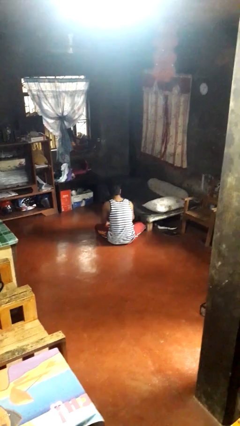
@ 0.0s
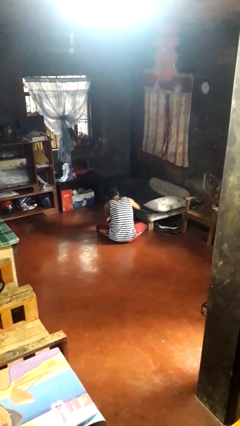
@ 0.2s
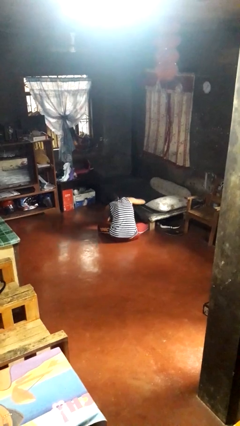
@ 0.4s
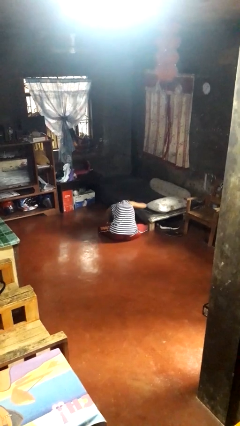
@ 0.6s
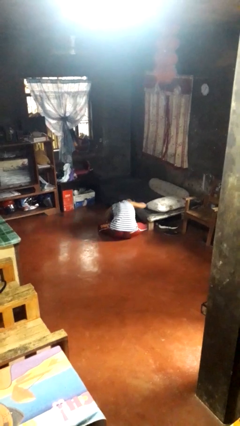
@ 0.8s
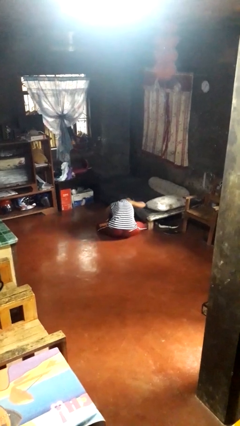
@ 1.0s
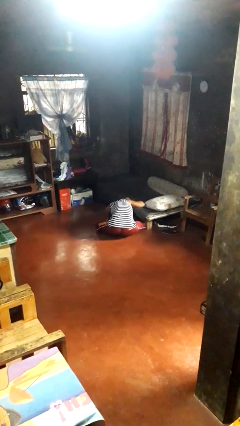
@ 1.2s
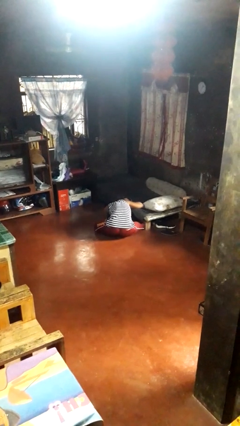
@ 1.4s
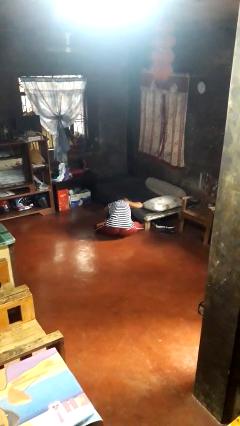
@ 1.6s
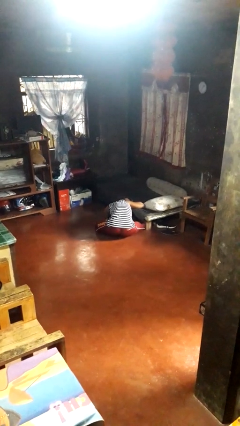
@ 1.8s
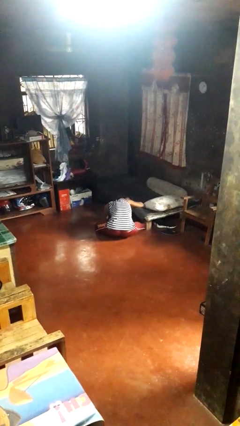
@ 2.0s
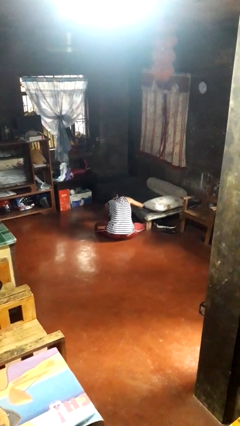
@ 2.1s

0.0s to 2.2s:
person searches under bed

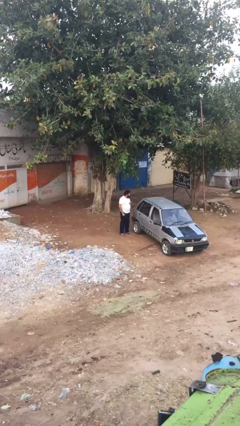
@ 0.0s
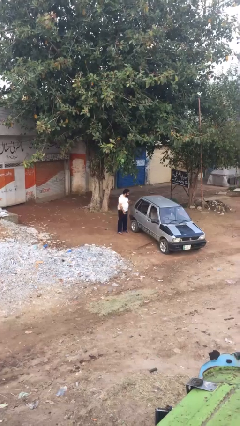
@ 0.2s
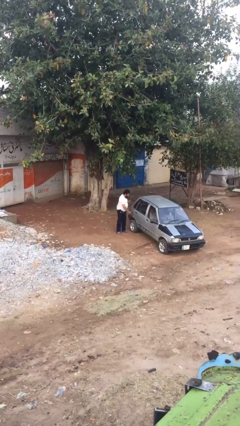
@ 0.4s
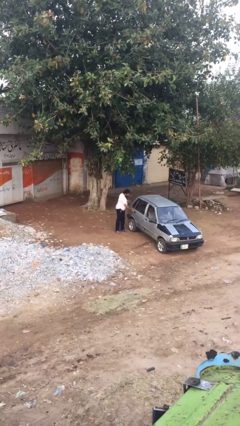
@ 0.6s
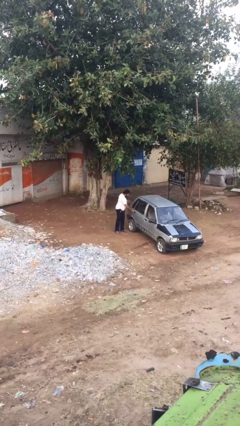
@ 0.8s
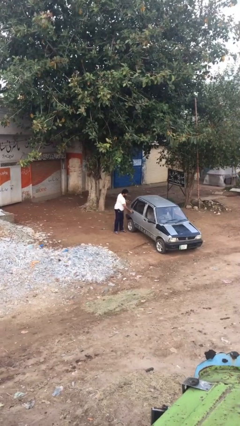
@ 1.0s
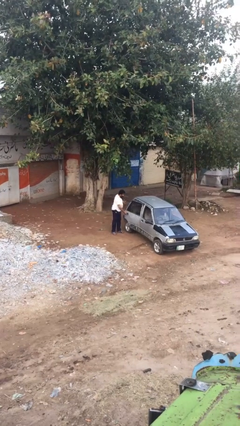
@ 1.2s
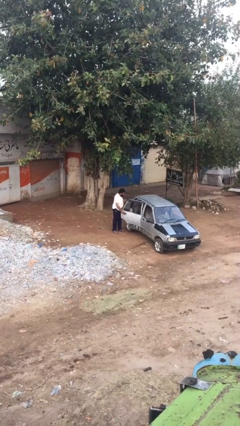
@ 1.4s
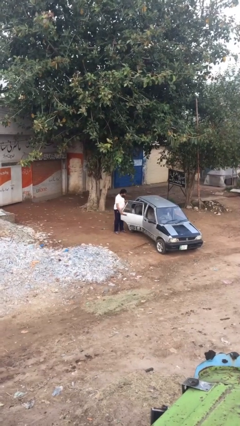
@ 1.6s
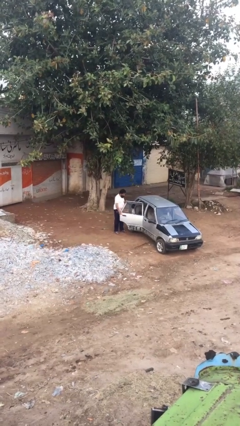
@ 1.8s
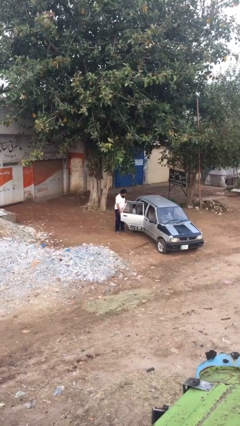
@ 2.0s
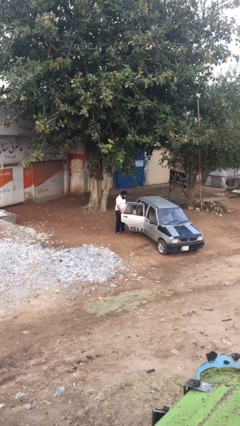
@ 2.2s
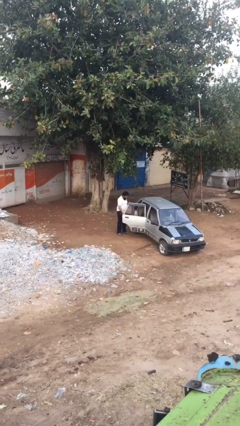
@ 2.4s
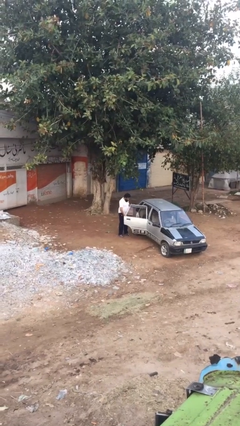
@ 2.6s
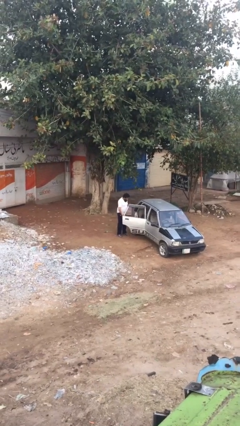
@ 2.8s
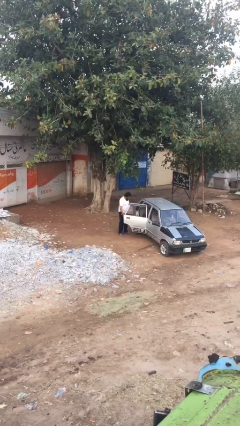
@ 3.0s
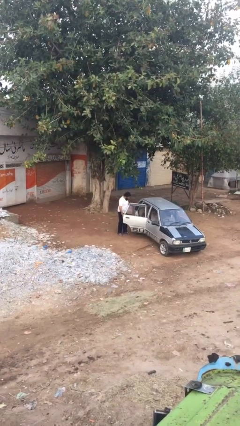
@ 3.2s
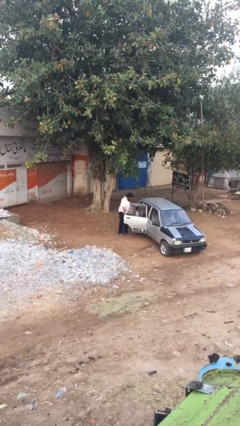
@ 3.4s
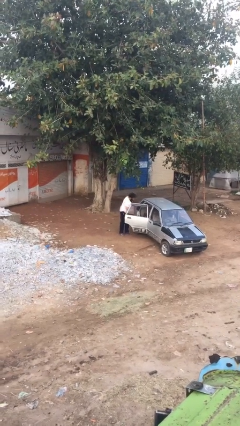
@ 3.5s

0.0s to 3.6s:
person opens car door

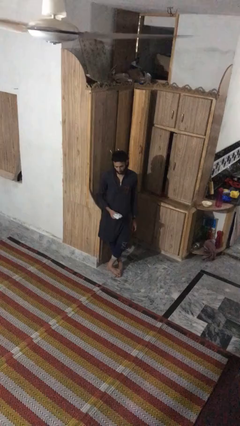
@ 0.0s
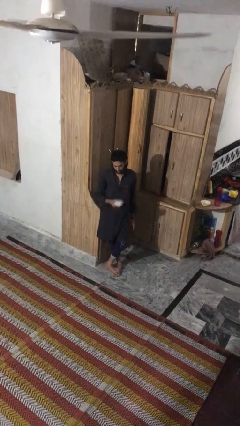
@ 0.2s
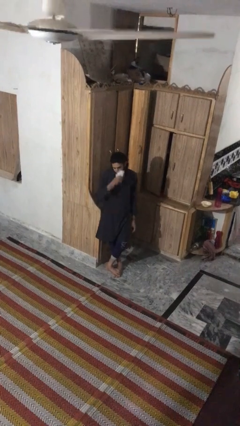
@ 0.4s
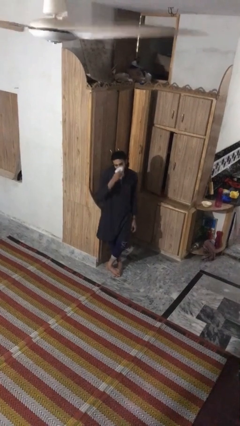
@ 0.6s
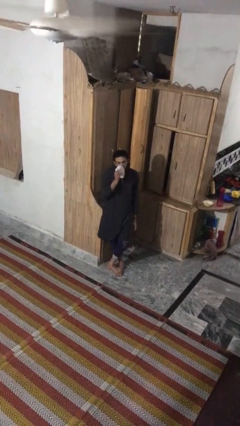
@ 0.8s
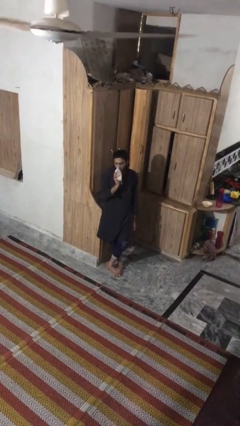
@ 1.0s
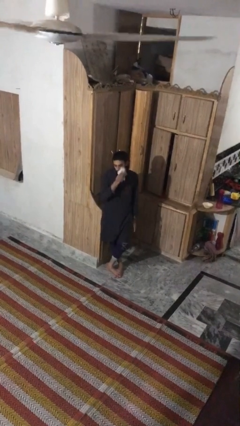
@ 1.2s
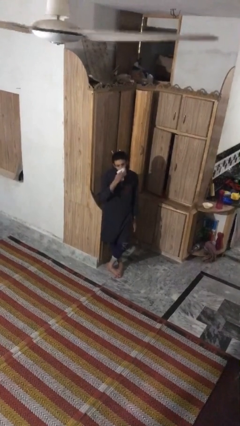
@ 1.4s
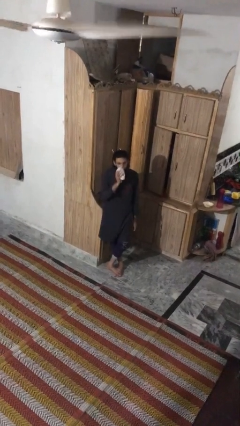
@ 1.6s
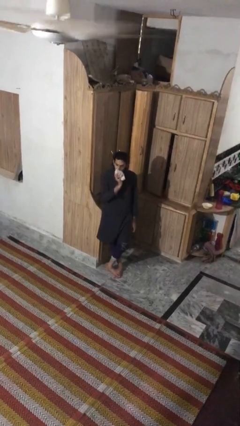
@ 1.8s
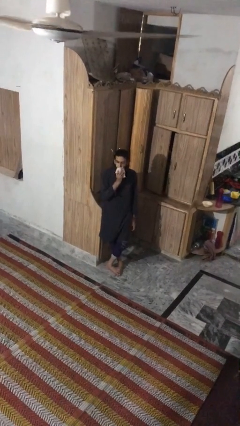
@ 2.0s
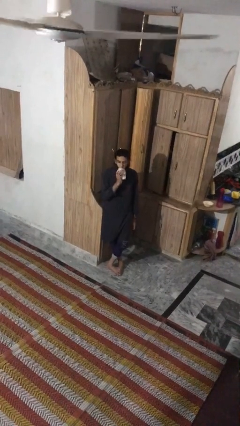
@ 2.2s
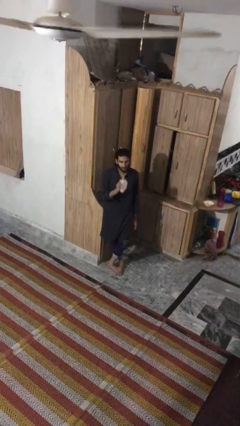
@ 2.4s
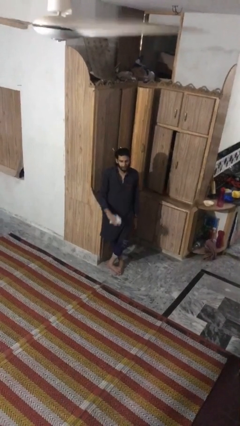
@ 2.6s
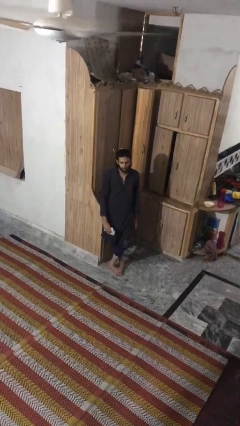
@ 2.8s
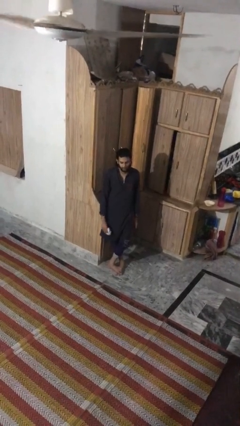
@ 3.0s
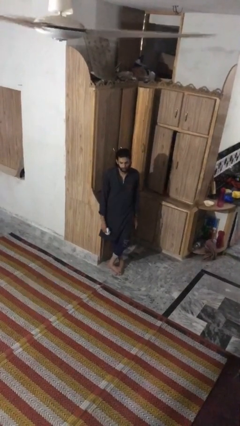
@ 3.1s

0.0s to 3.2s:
person wipes mouth with napkin

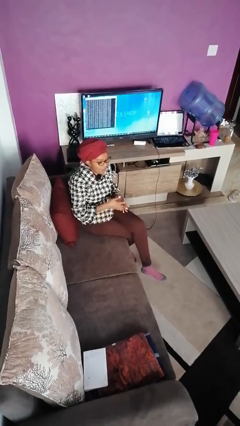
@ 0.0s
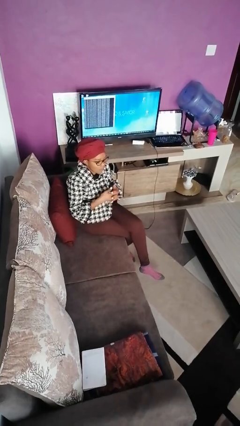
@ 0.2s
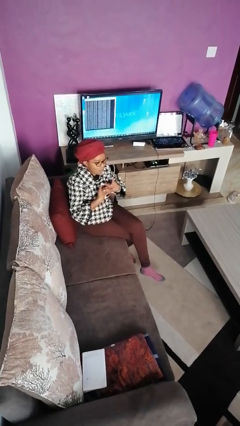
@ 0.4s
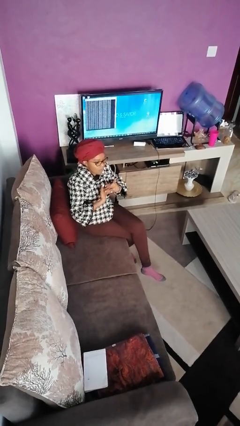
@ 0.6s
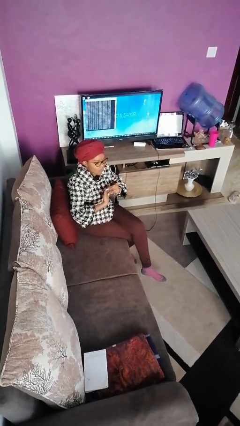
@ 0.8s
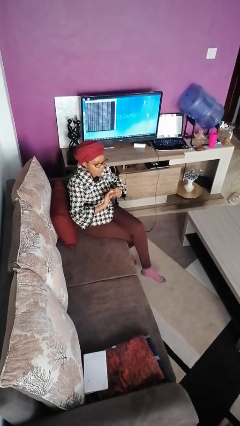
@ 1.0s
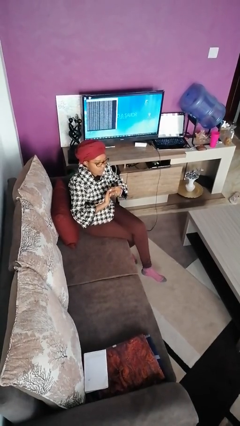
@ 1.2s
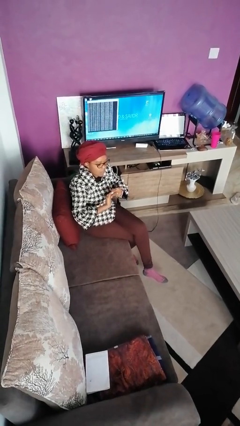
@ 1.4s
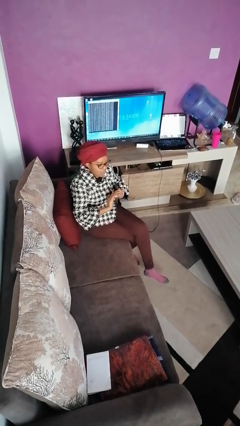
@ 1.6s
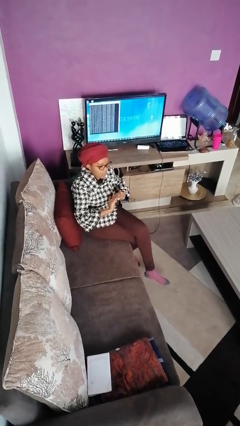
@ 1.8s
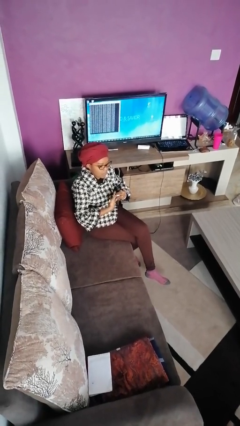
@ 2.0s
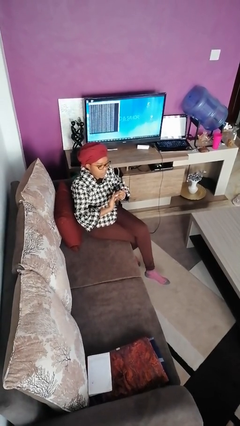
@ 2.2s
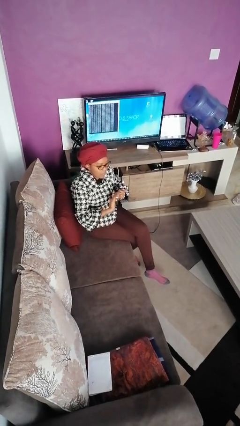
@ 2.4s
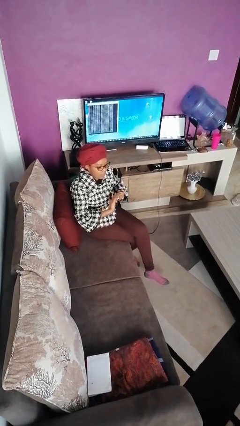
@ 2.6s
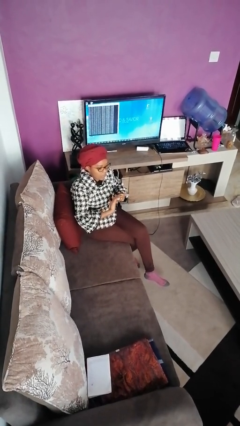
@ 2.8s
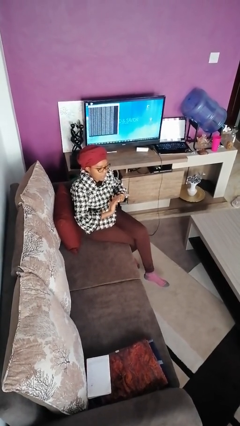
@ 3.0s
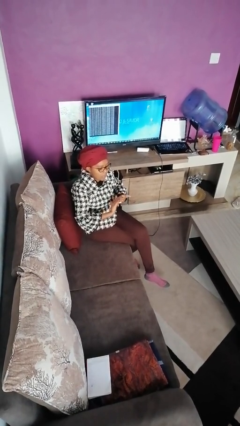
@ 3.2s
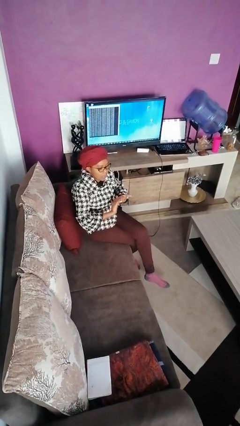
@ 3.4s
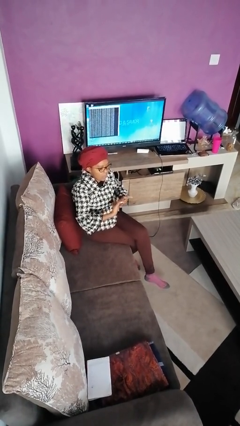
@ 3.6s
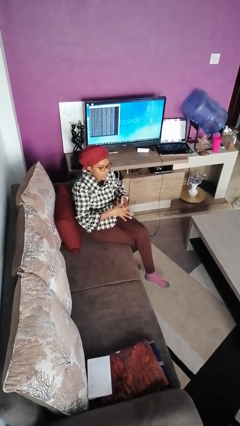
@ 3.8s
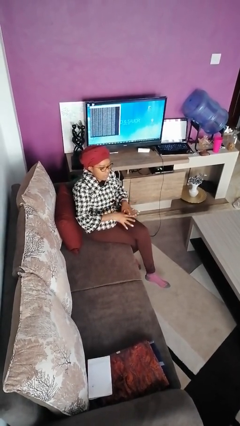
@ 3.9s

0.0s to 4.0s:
person cracks knuckles

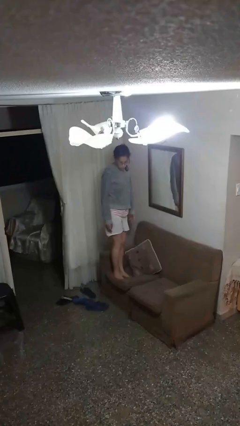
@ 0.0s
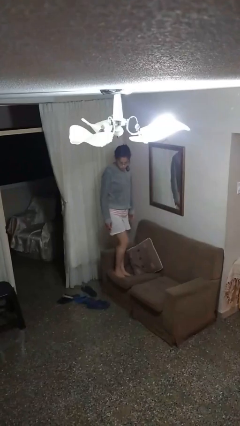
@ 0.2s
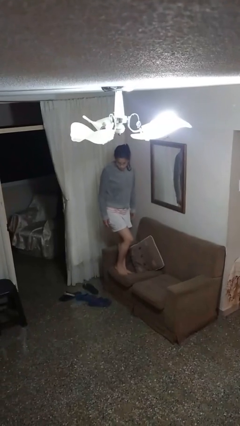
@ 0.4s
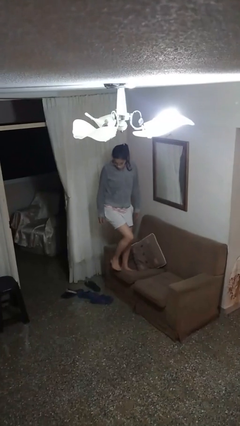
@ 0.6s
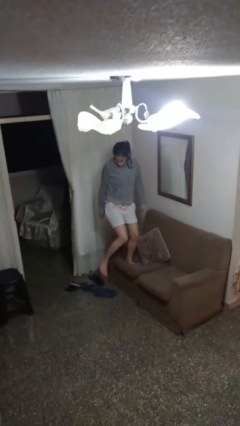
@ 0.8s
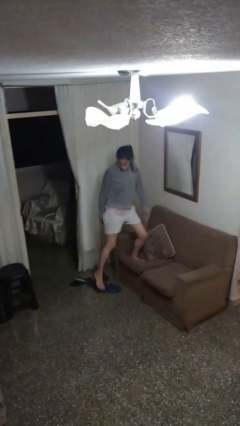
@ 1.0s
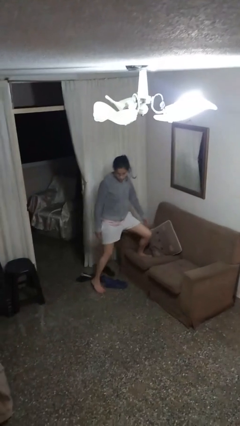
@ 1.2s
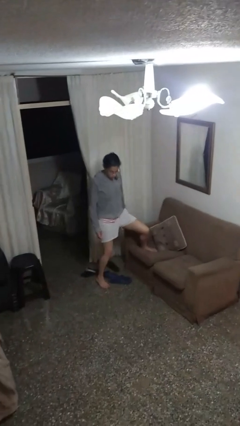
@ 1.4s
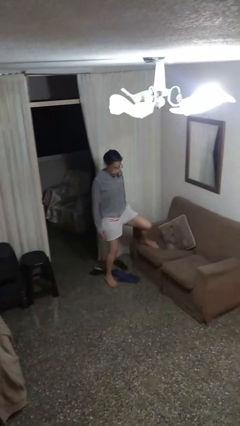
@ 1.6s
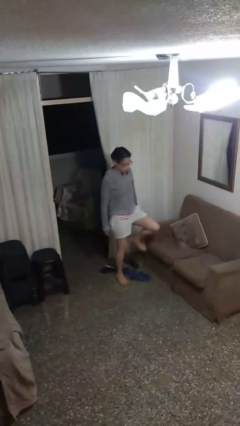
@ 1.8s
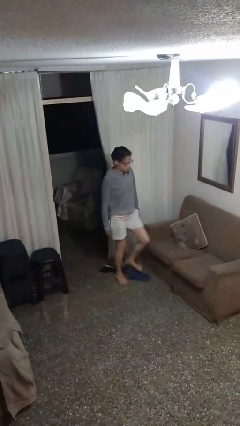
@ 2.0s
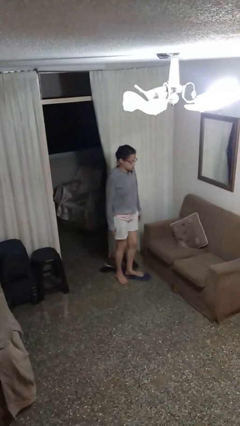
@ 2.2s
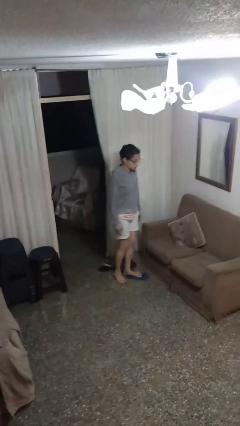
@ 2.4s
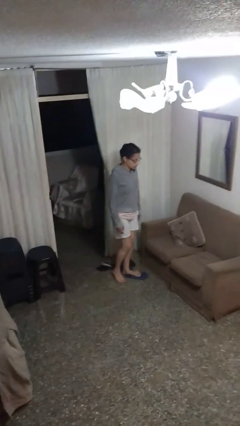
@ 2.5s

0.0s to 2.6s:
person climbs off couch

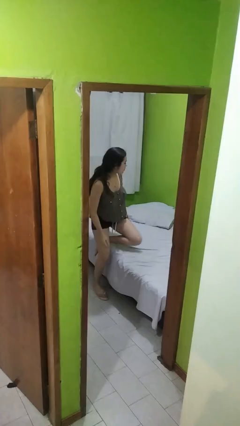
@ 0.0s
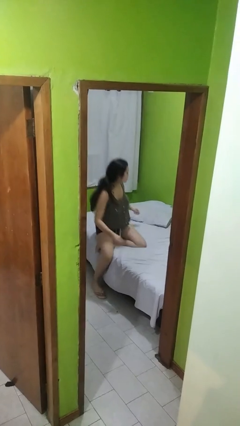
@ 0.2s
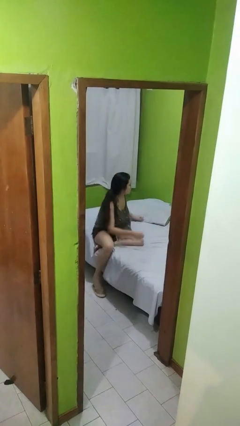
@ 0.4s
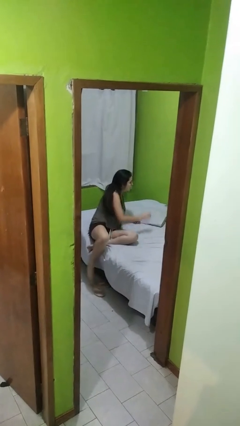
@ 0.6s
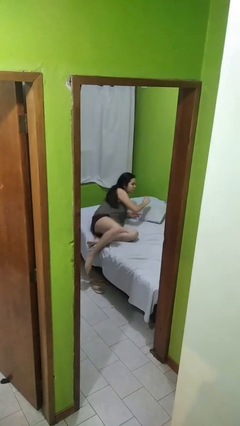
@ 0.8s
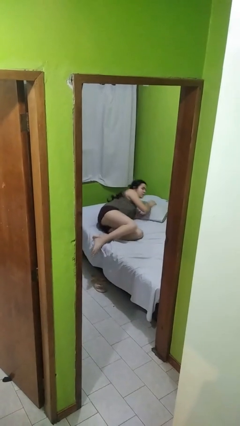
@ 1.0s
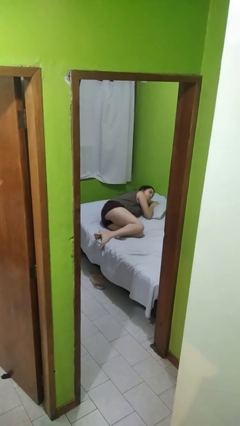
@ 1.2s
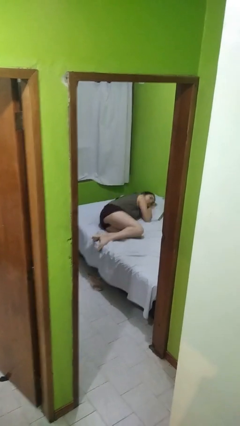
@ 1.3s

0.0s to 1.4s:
person lies down on bed
